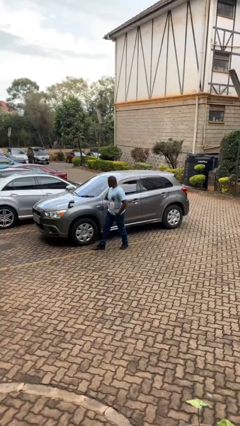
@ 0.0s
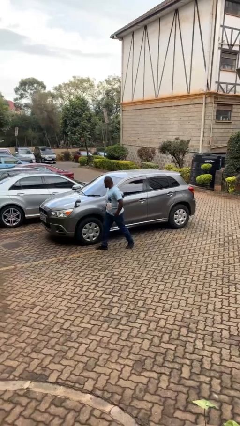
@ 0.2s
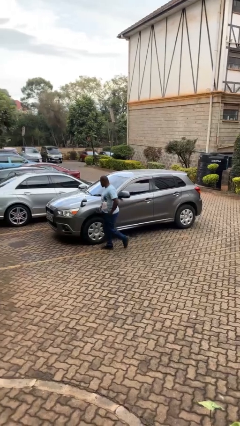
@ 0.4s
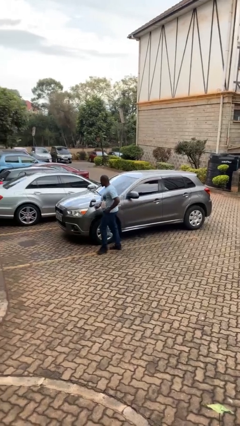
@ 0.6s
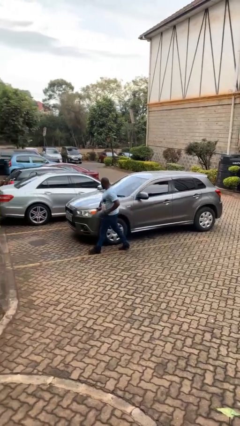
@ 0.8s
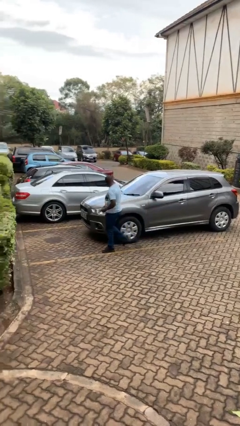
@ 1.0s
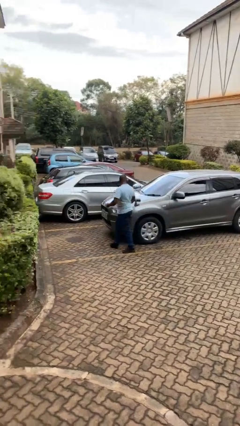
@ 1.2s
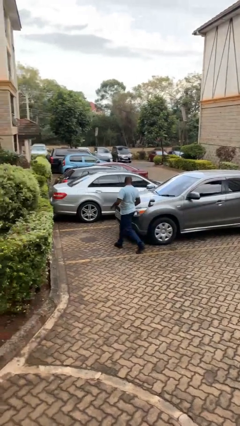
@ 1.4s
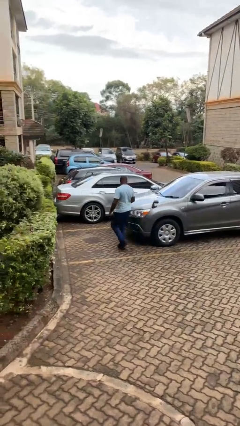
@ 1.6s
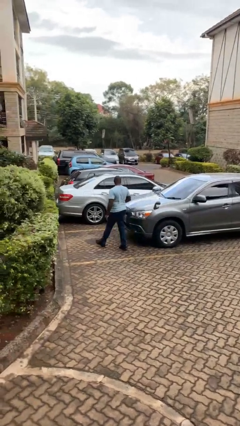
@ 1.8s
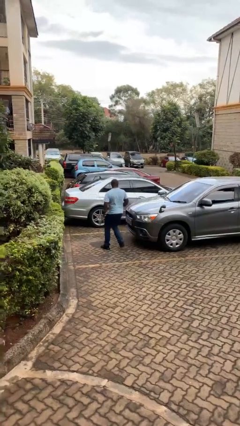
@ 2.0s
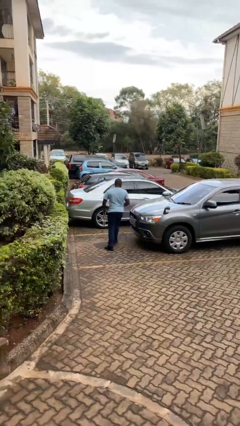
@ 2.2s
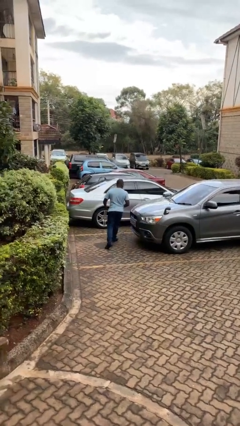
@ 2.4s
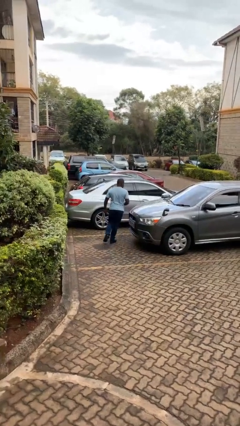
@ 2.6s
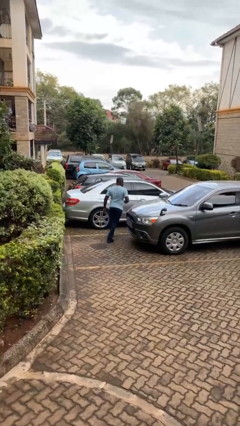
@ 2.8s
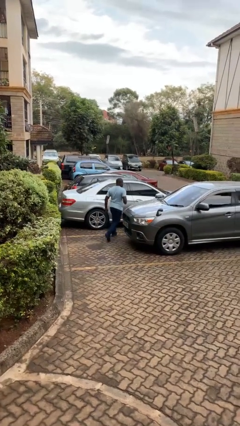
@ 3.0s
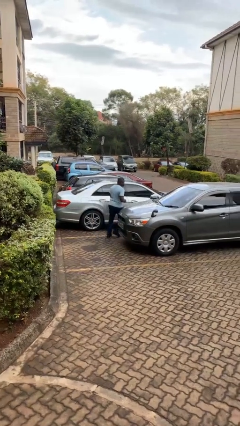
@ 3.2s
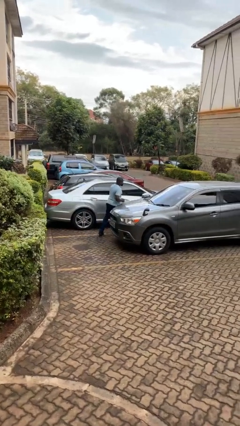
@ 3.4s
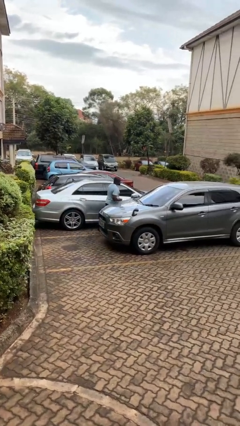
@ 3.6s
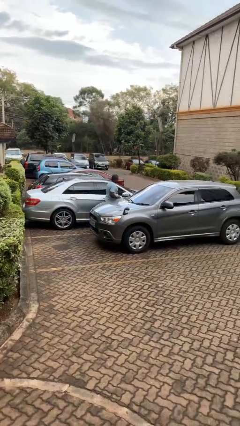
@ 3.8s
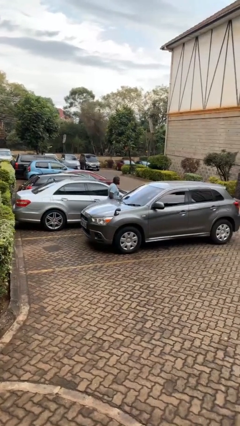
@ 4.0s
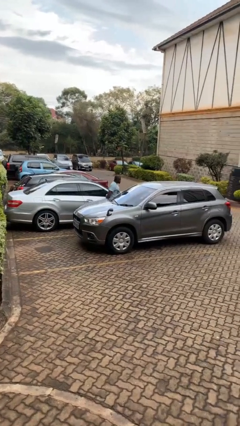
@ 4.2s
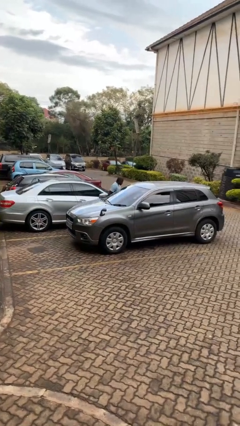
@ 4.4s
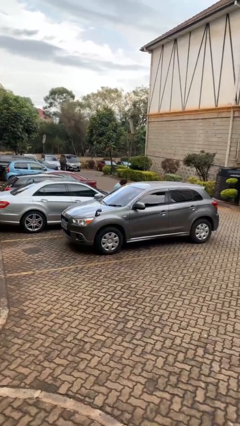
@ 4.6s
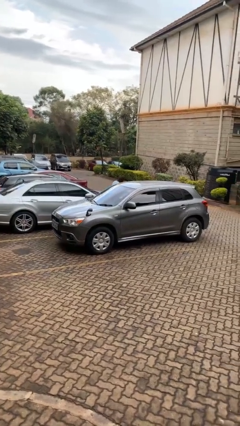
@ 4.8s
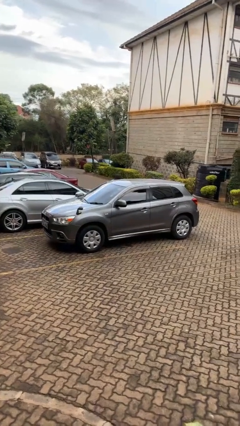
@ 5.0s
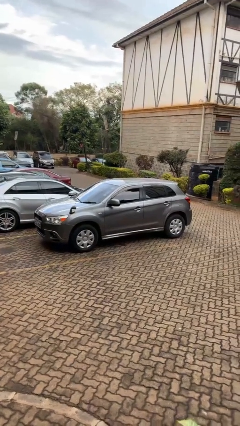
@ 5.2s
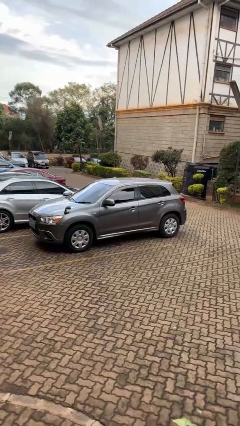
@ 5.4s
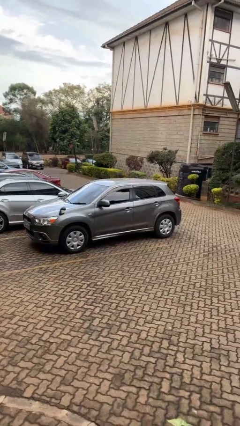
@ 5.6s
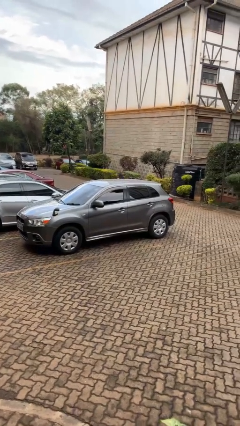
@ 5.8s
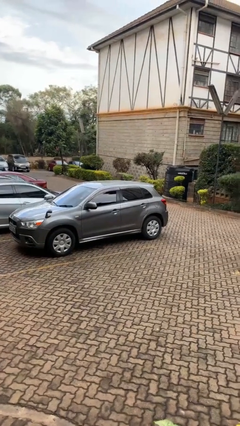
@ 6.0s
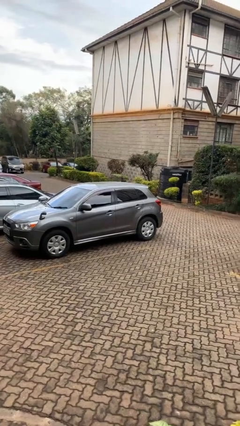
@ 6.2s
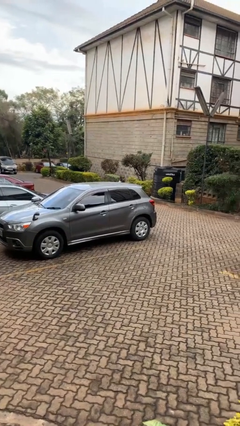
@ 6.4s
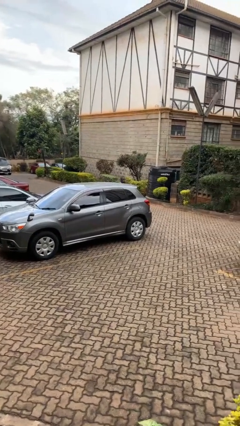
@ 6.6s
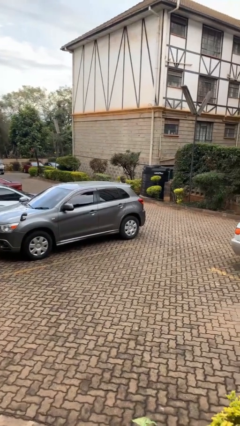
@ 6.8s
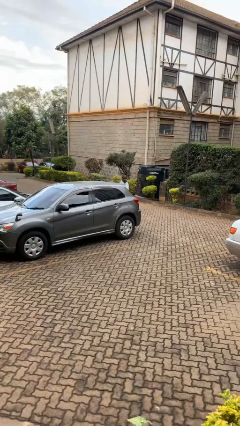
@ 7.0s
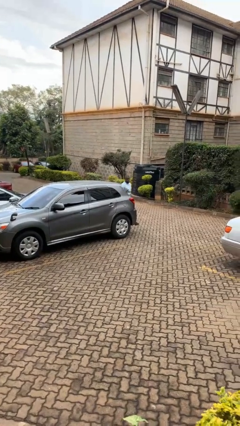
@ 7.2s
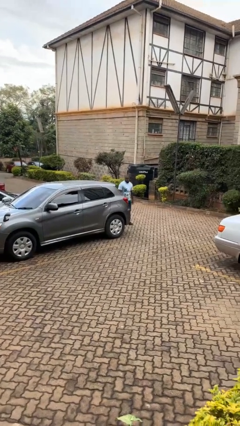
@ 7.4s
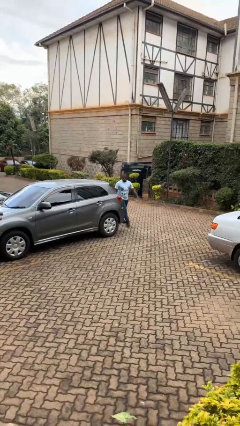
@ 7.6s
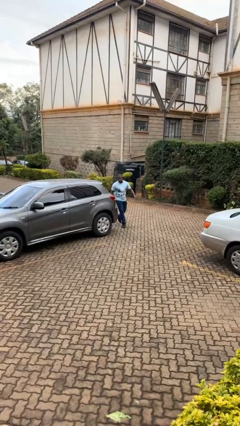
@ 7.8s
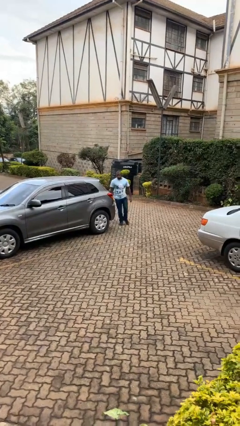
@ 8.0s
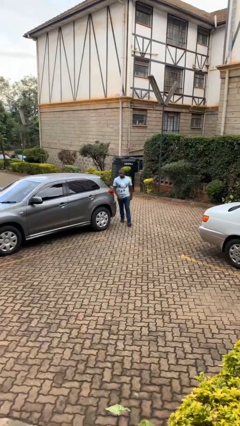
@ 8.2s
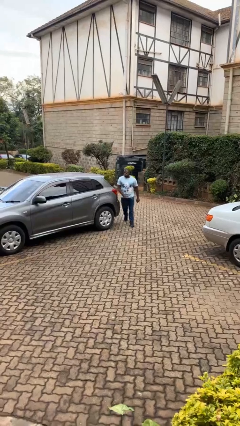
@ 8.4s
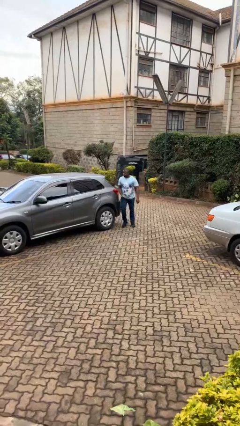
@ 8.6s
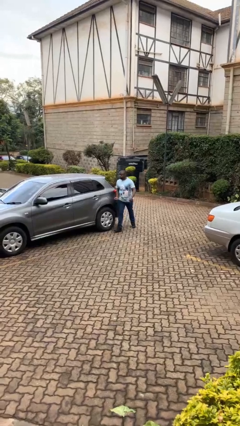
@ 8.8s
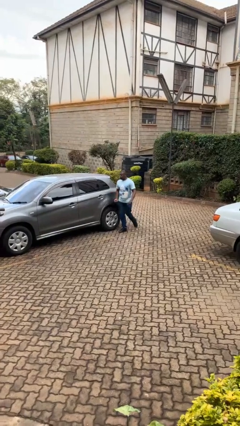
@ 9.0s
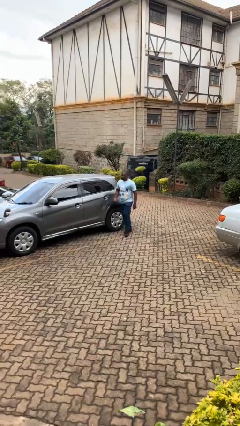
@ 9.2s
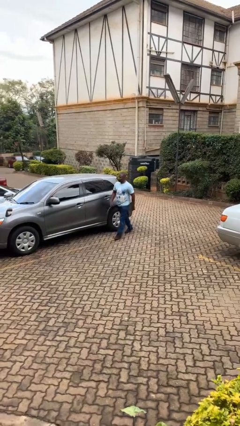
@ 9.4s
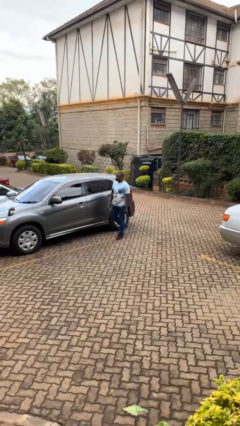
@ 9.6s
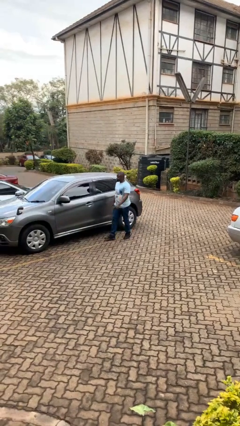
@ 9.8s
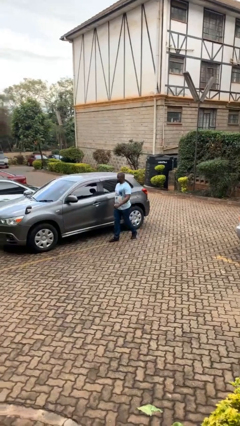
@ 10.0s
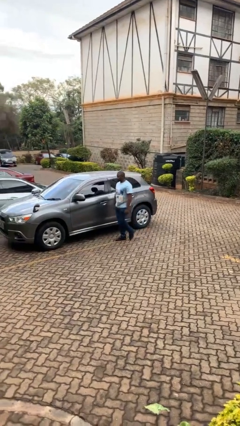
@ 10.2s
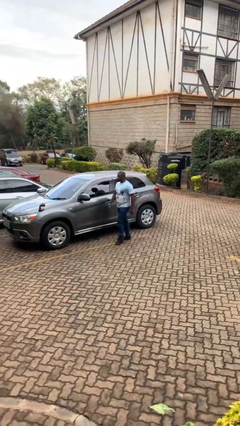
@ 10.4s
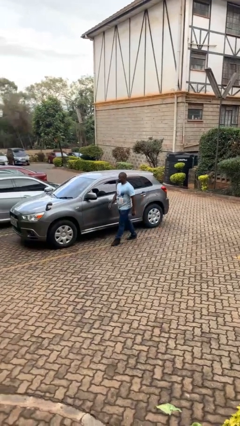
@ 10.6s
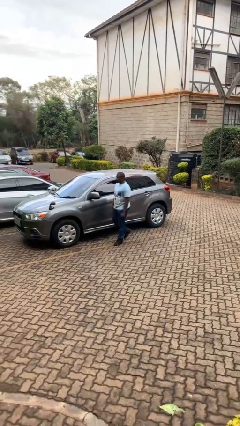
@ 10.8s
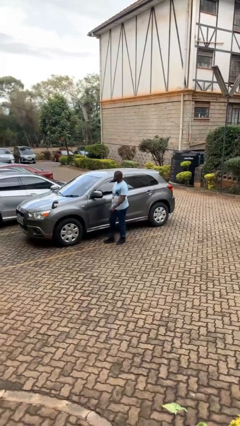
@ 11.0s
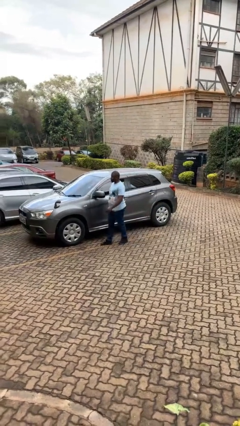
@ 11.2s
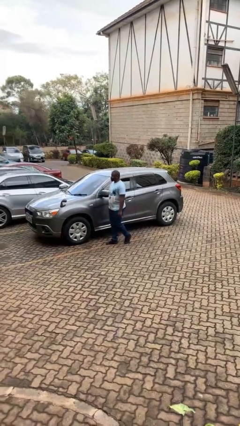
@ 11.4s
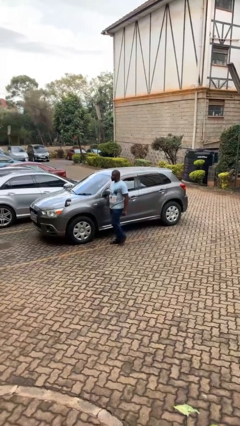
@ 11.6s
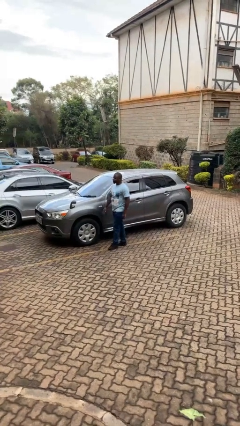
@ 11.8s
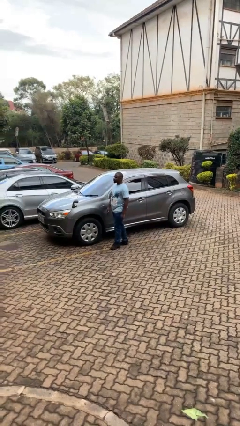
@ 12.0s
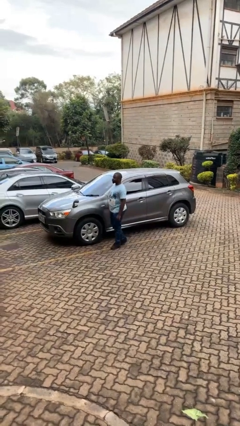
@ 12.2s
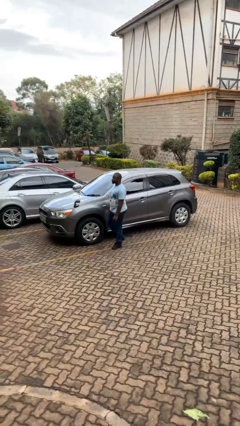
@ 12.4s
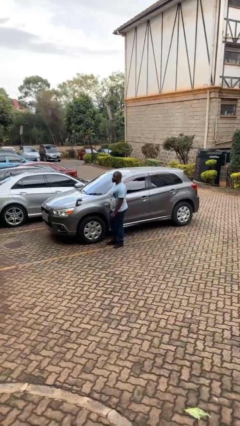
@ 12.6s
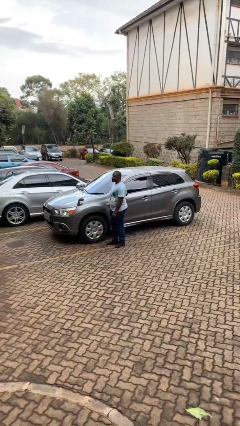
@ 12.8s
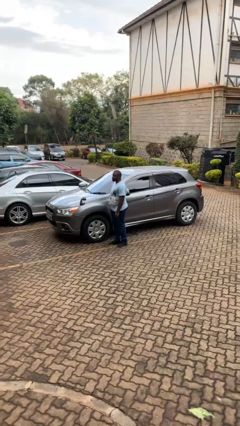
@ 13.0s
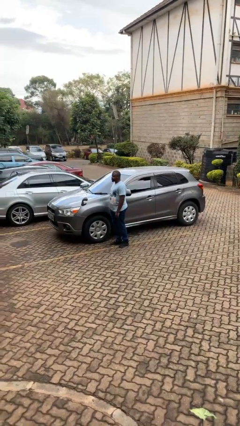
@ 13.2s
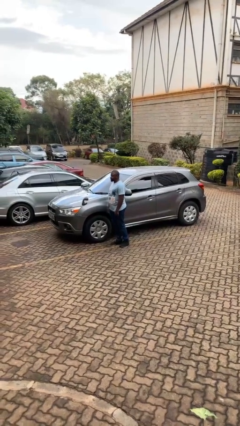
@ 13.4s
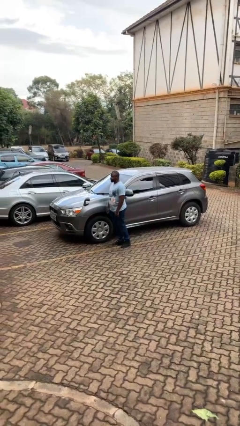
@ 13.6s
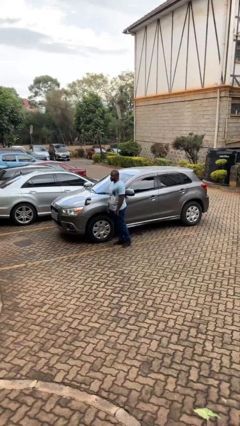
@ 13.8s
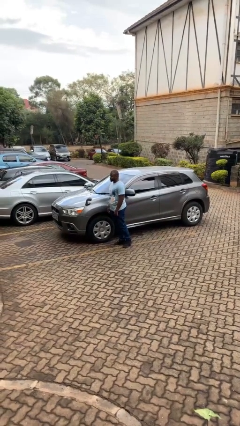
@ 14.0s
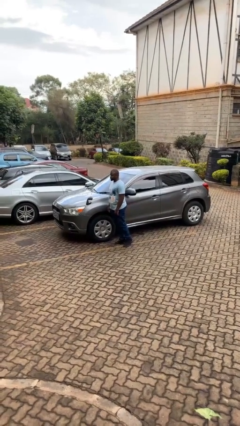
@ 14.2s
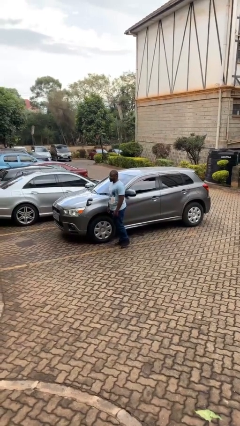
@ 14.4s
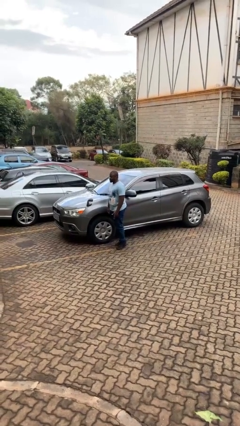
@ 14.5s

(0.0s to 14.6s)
person walks around car

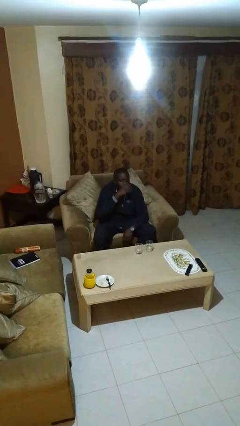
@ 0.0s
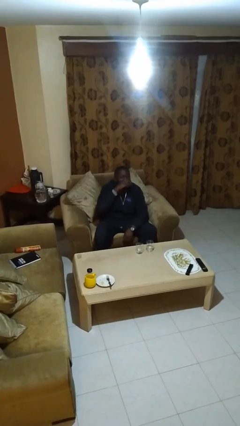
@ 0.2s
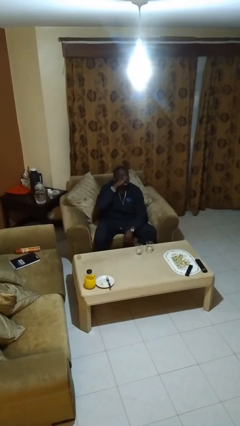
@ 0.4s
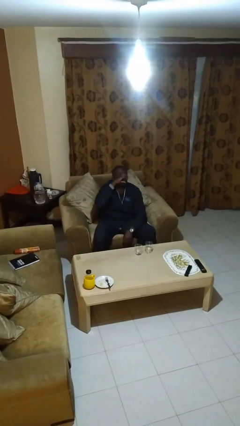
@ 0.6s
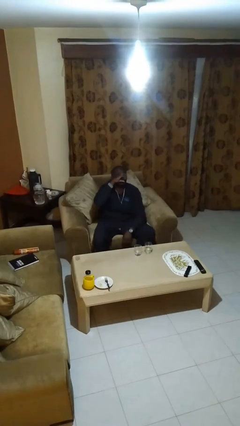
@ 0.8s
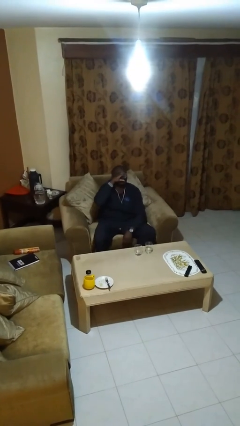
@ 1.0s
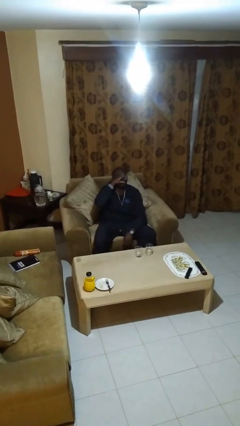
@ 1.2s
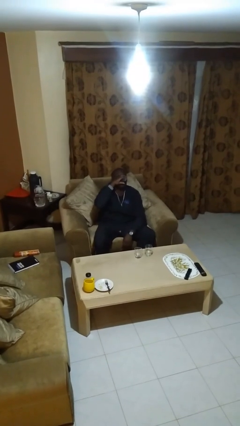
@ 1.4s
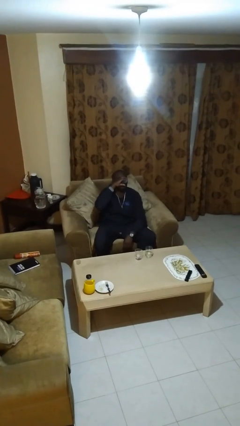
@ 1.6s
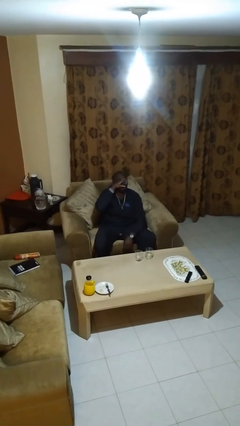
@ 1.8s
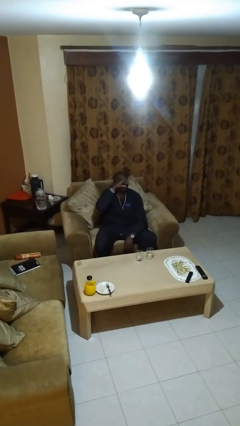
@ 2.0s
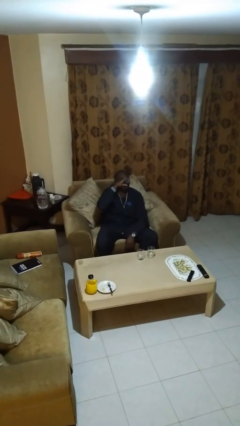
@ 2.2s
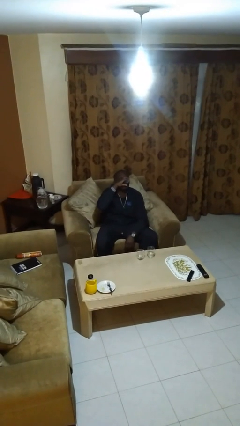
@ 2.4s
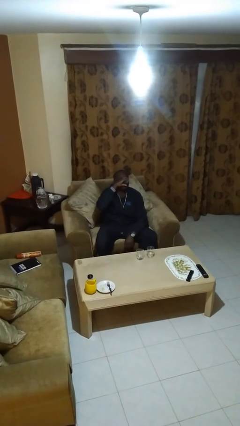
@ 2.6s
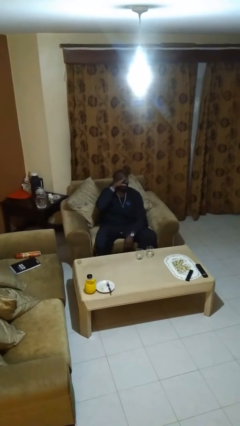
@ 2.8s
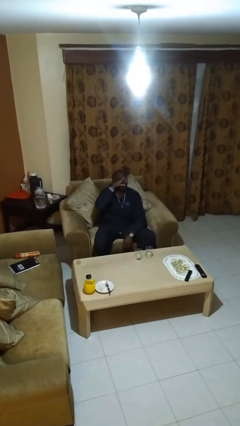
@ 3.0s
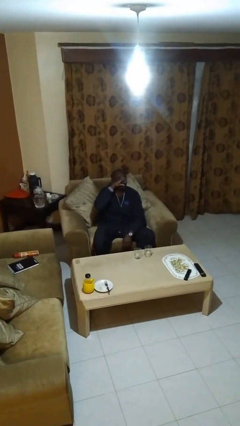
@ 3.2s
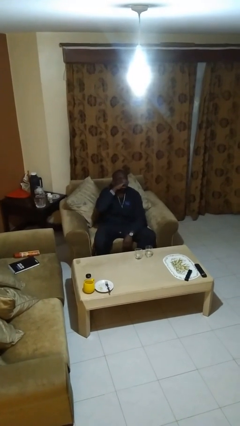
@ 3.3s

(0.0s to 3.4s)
person drinks from shotglass
